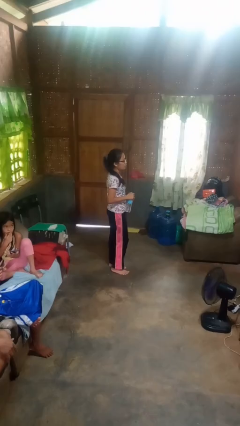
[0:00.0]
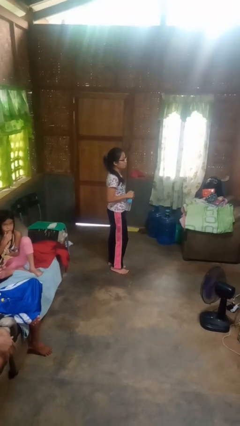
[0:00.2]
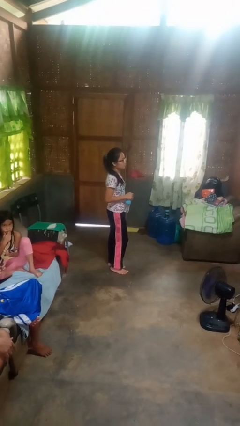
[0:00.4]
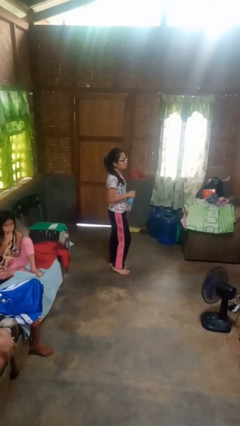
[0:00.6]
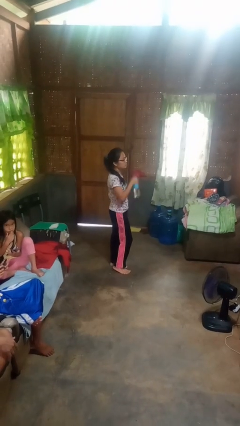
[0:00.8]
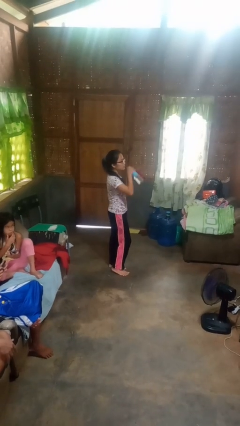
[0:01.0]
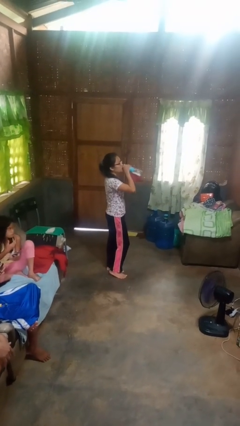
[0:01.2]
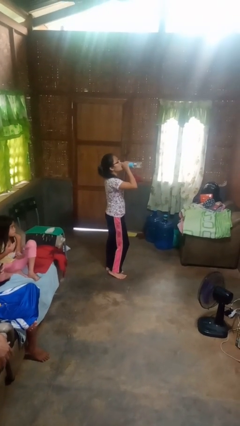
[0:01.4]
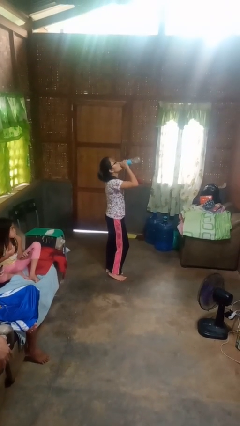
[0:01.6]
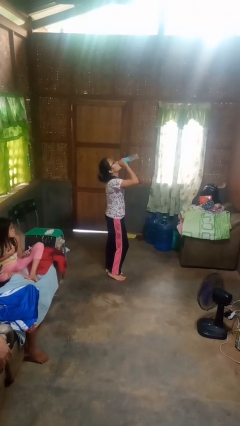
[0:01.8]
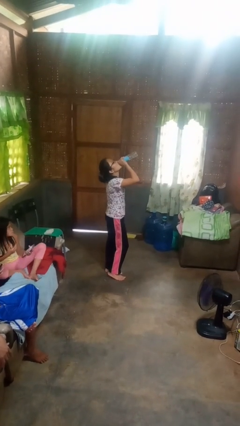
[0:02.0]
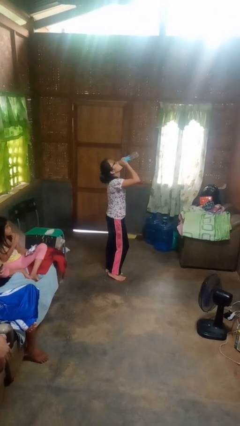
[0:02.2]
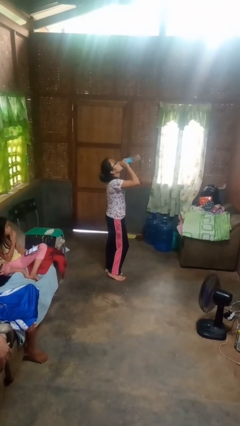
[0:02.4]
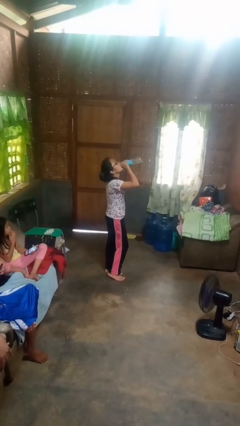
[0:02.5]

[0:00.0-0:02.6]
person drinks from bottle

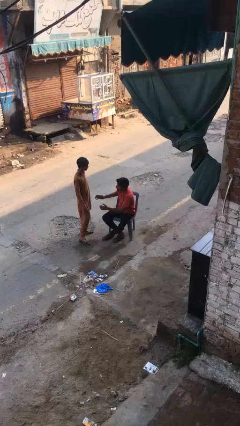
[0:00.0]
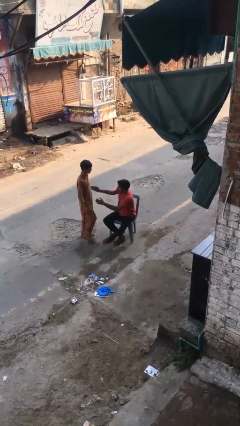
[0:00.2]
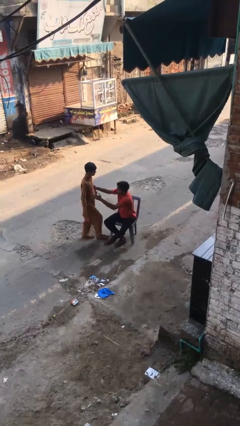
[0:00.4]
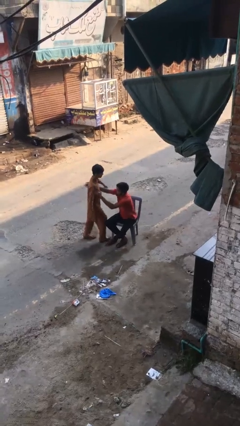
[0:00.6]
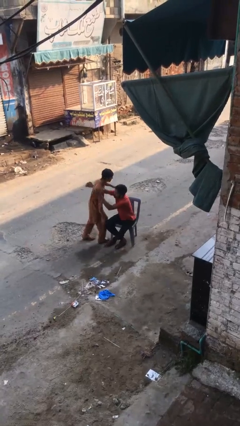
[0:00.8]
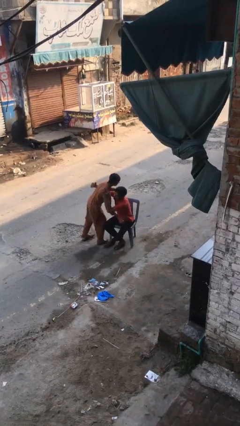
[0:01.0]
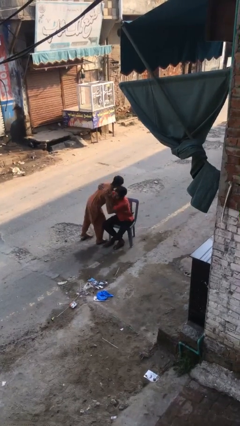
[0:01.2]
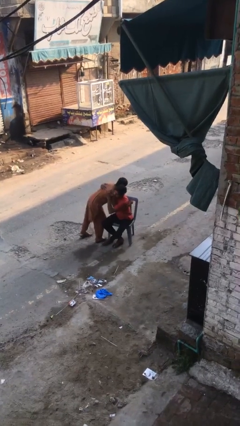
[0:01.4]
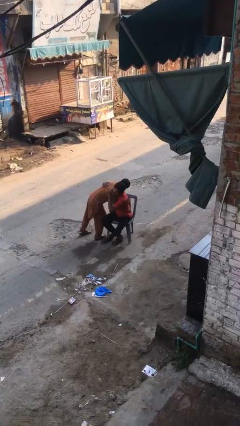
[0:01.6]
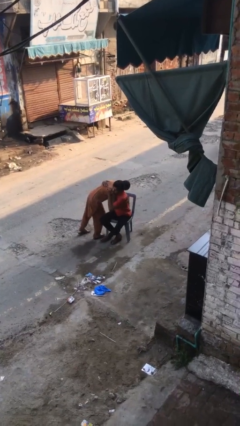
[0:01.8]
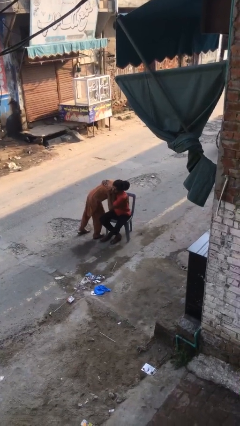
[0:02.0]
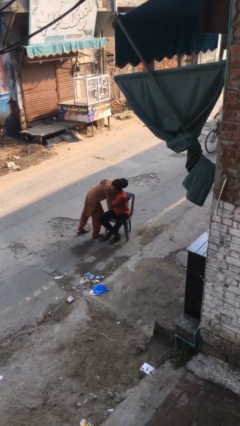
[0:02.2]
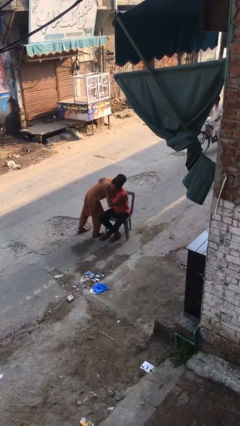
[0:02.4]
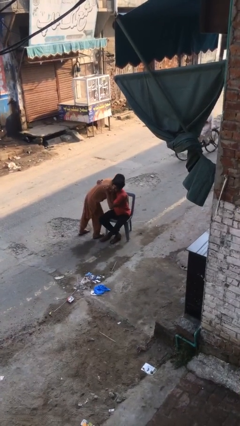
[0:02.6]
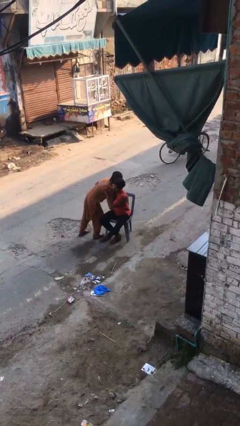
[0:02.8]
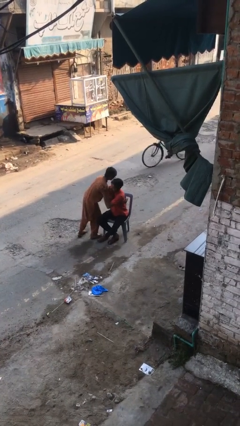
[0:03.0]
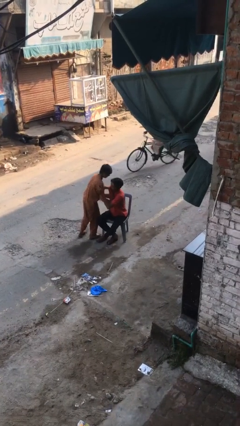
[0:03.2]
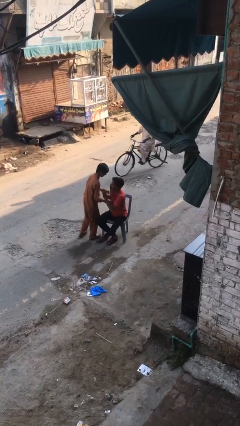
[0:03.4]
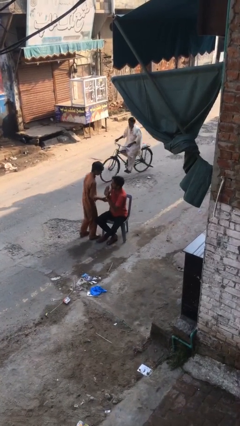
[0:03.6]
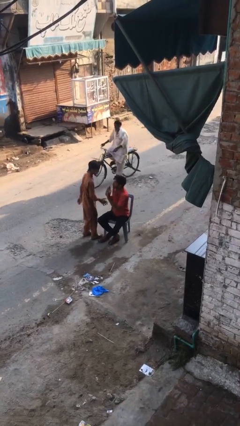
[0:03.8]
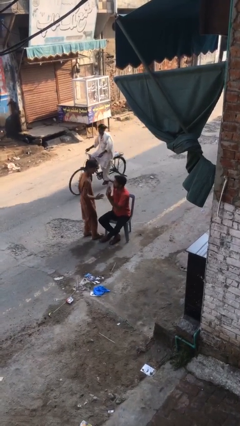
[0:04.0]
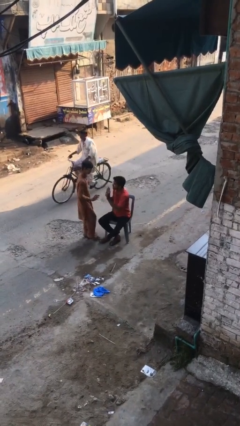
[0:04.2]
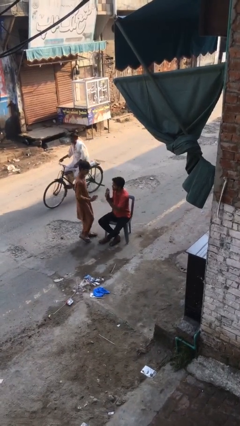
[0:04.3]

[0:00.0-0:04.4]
person embraces person

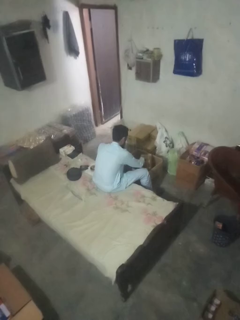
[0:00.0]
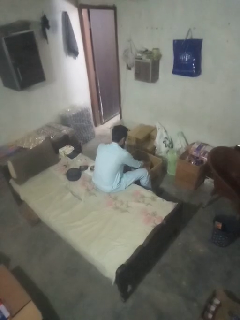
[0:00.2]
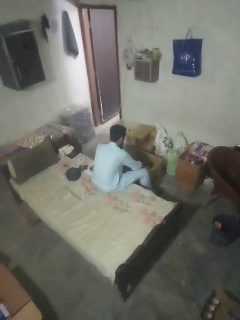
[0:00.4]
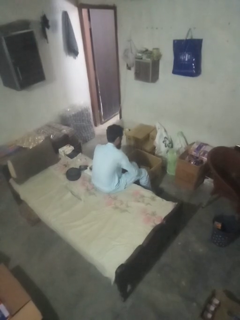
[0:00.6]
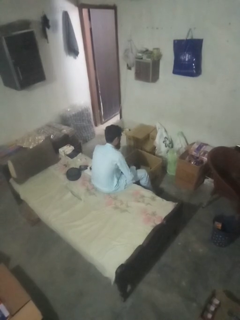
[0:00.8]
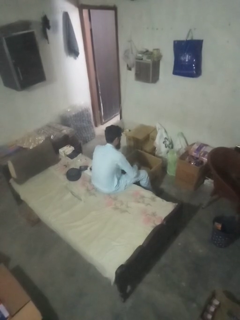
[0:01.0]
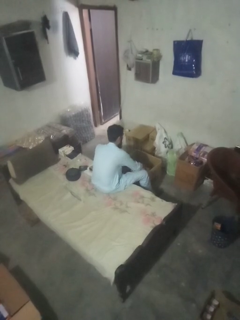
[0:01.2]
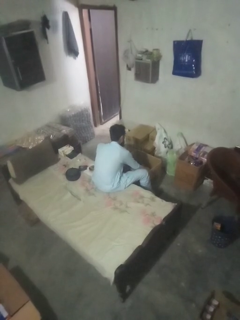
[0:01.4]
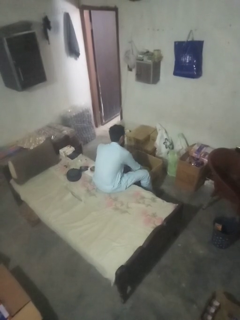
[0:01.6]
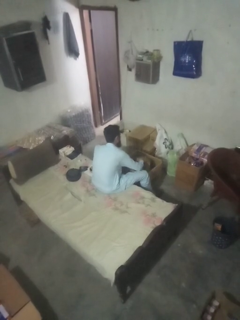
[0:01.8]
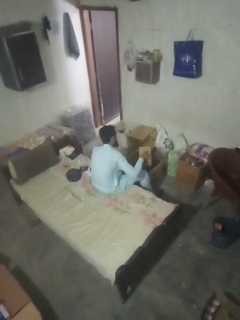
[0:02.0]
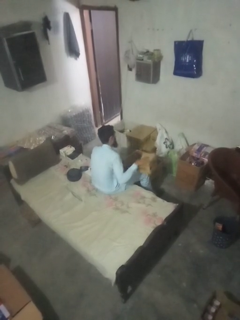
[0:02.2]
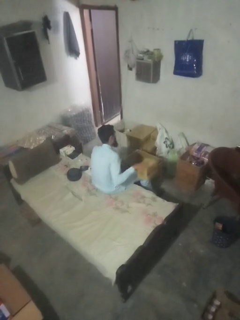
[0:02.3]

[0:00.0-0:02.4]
person takes object from box

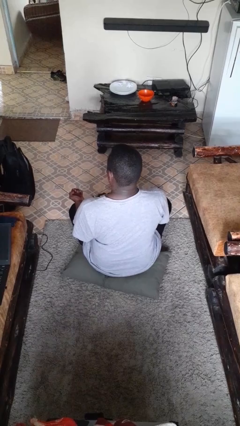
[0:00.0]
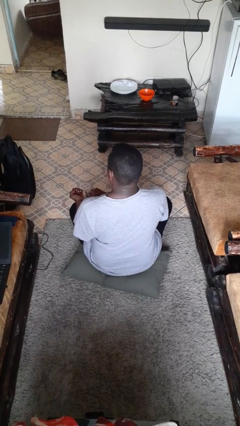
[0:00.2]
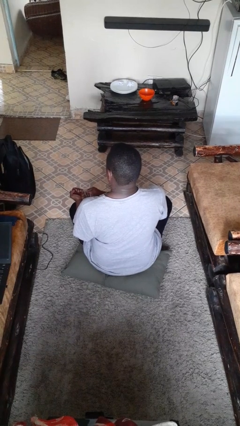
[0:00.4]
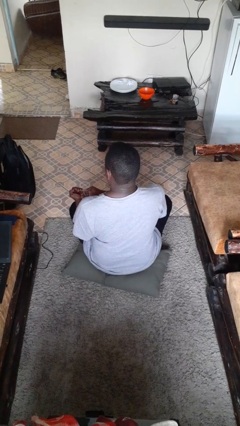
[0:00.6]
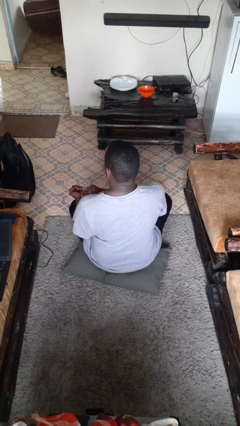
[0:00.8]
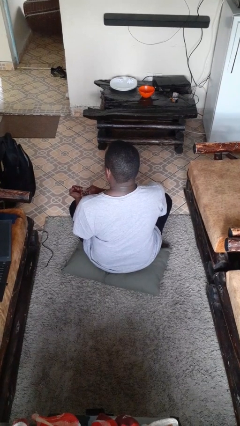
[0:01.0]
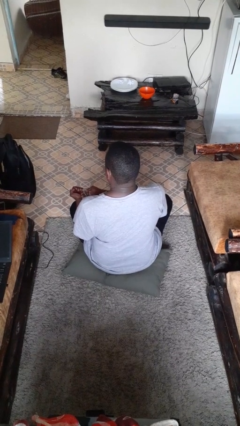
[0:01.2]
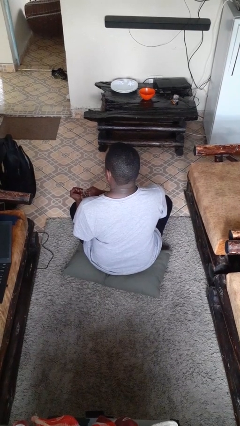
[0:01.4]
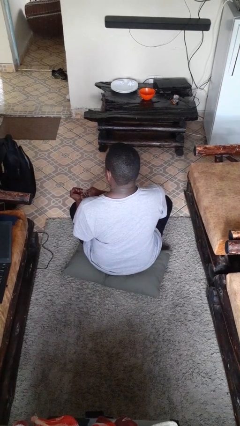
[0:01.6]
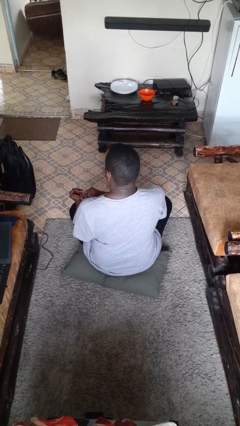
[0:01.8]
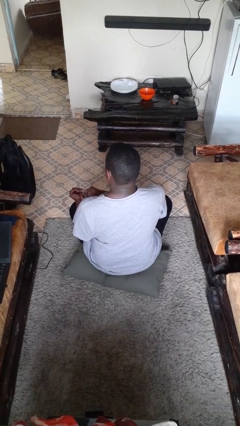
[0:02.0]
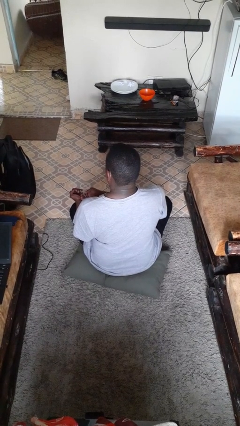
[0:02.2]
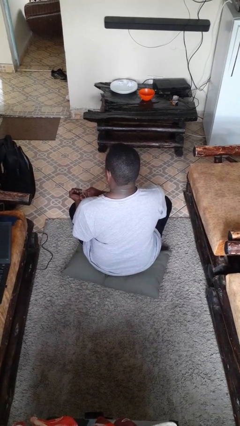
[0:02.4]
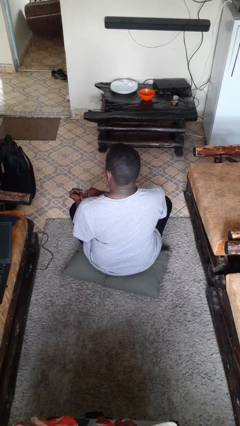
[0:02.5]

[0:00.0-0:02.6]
person clips fingernails

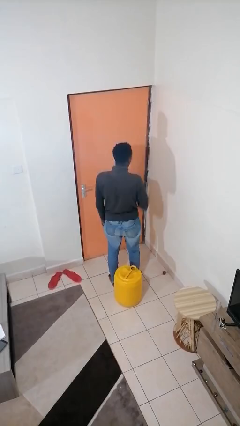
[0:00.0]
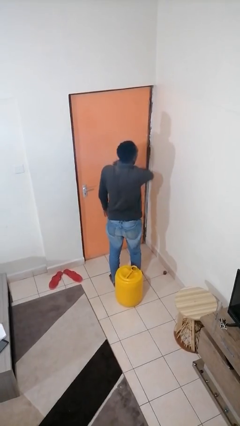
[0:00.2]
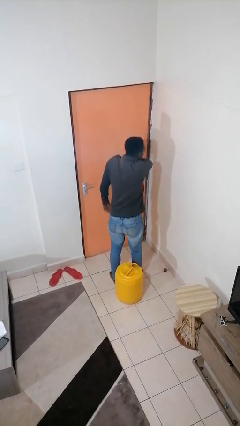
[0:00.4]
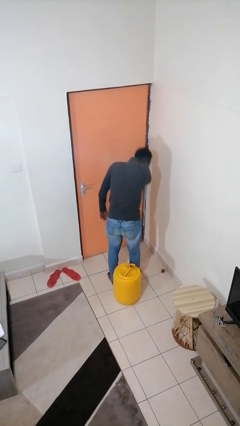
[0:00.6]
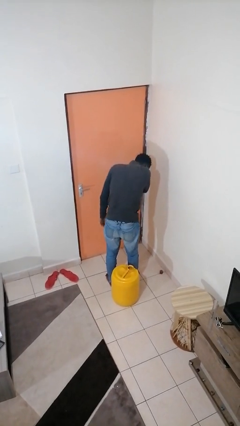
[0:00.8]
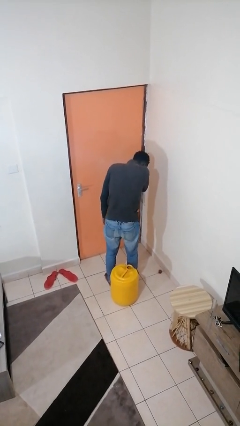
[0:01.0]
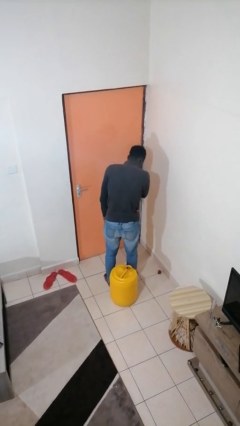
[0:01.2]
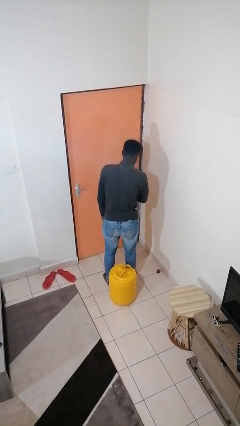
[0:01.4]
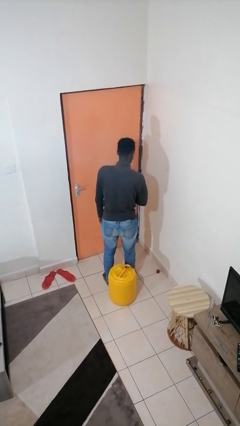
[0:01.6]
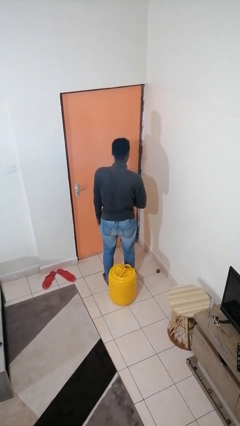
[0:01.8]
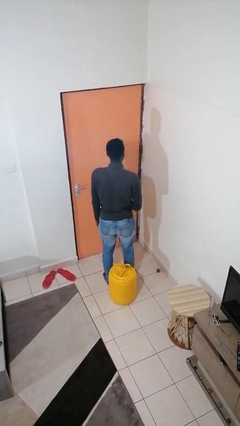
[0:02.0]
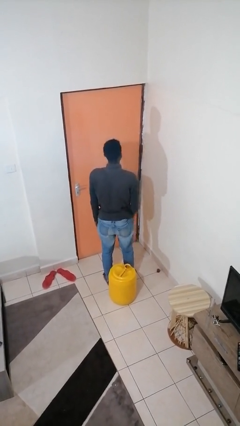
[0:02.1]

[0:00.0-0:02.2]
person sneezes into arm

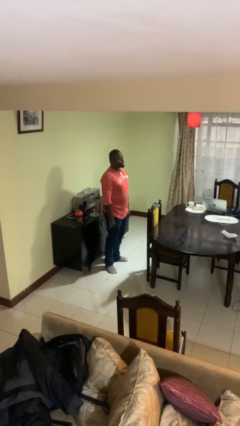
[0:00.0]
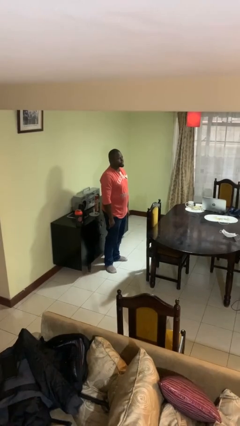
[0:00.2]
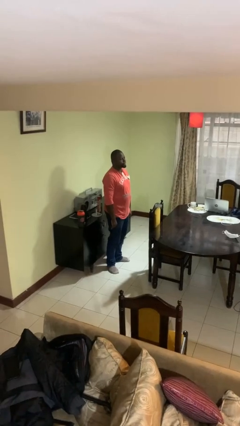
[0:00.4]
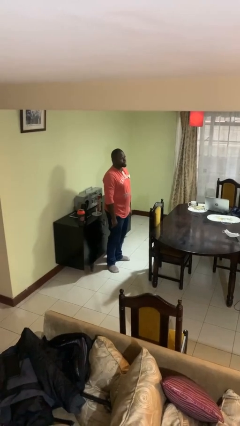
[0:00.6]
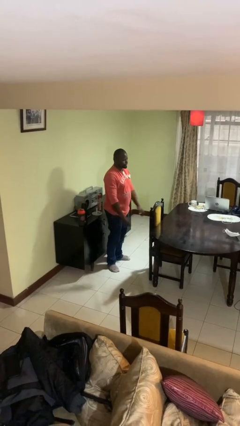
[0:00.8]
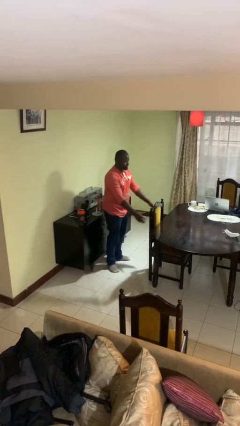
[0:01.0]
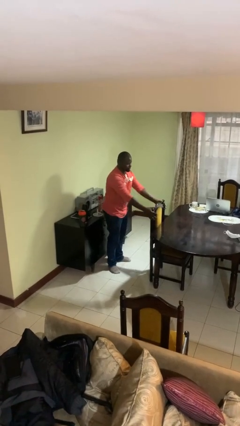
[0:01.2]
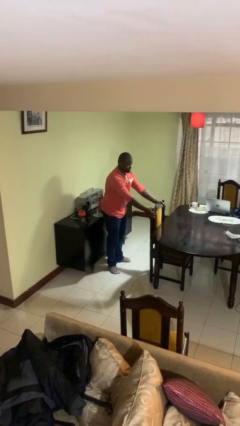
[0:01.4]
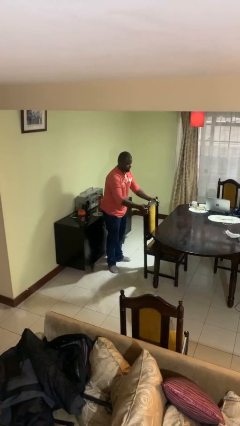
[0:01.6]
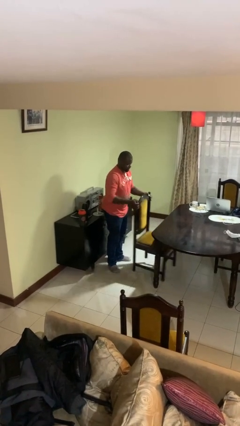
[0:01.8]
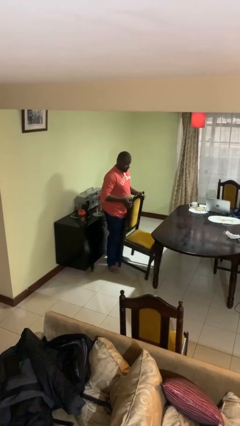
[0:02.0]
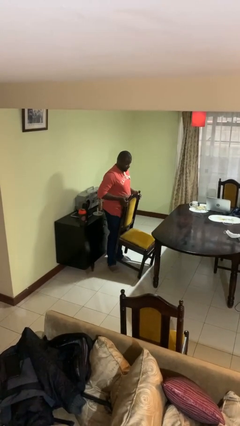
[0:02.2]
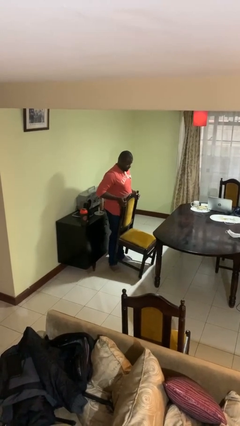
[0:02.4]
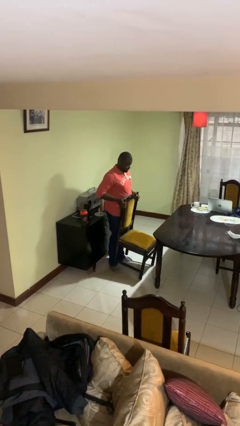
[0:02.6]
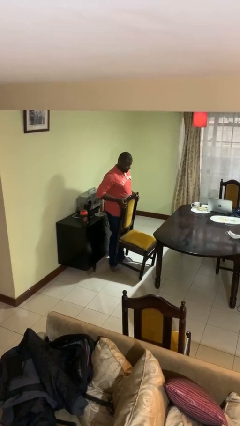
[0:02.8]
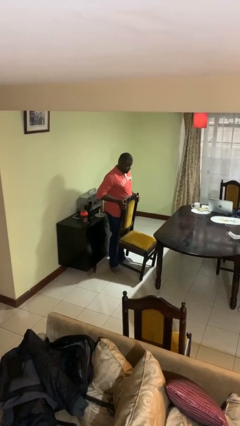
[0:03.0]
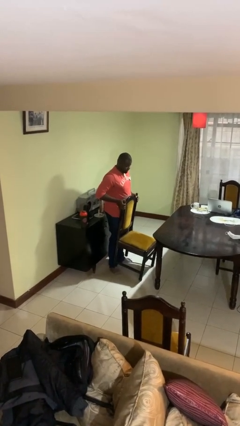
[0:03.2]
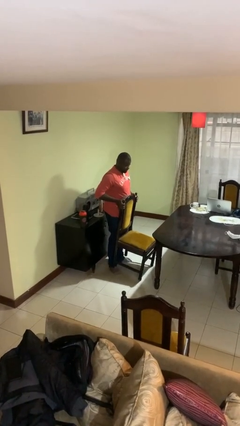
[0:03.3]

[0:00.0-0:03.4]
person pulls out chair

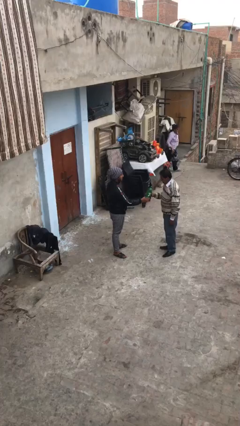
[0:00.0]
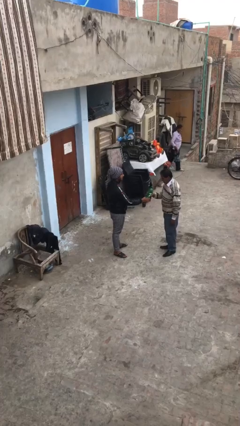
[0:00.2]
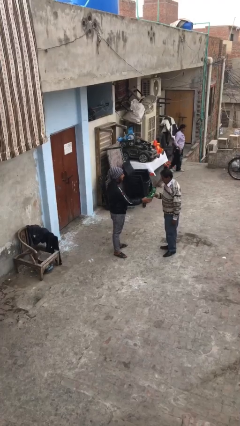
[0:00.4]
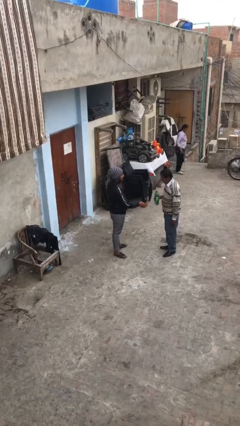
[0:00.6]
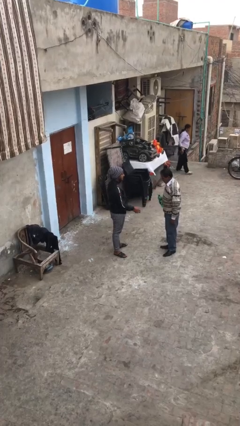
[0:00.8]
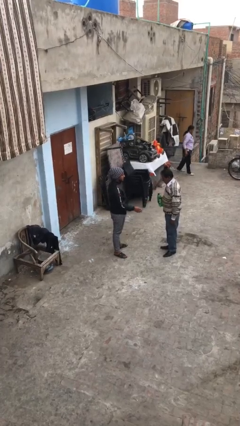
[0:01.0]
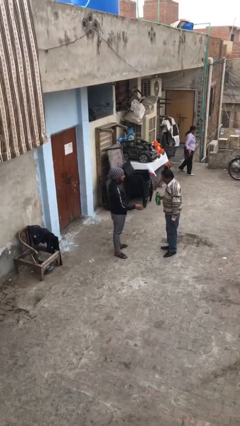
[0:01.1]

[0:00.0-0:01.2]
person transfers object to person
